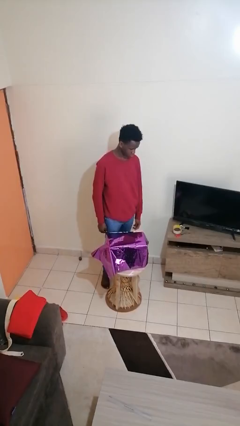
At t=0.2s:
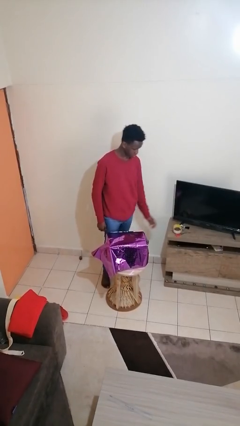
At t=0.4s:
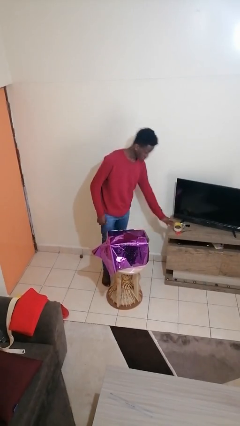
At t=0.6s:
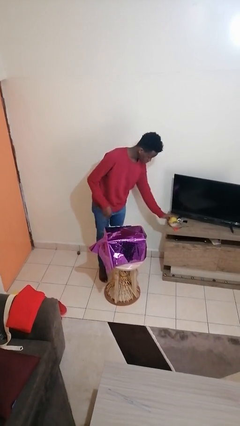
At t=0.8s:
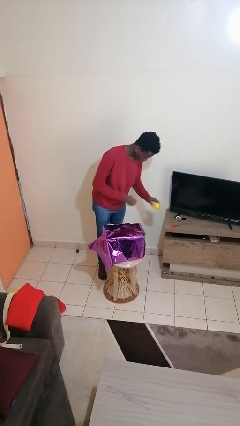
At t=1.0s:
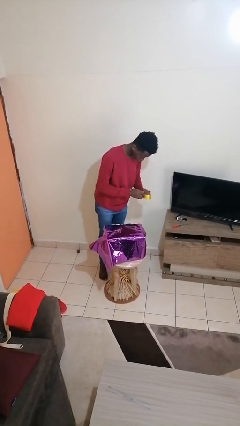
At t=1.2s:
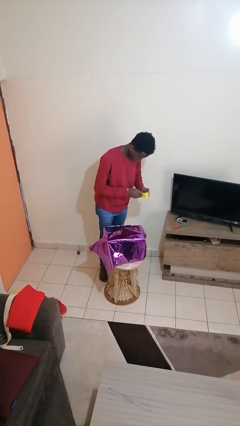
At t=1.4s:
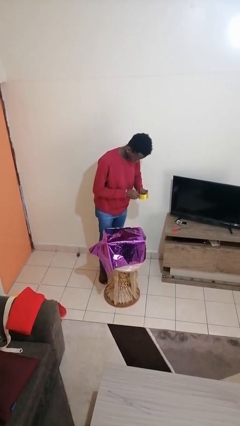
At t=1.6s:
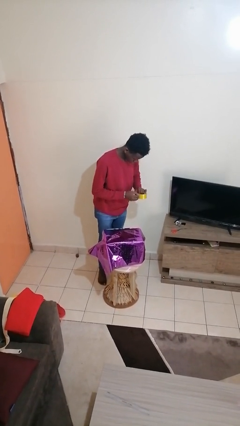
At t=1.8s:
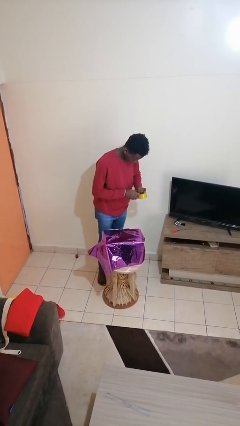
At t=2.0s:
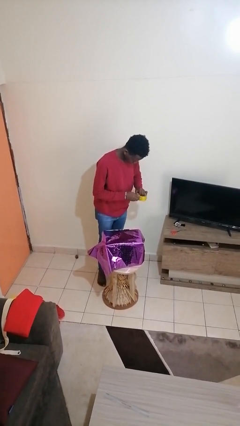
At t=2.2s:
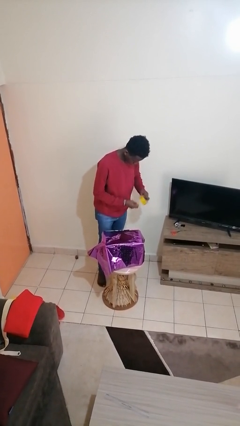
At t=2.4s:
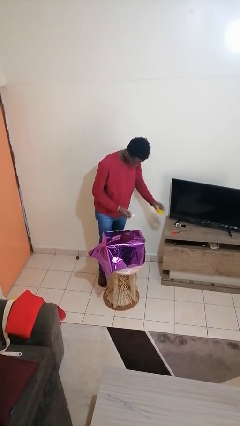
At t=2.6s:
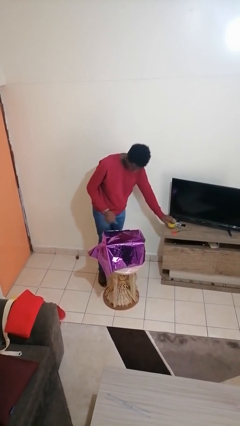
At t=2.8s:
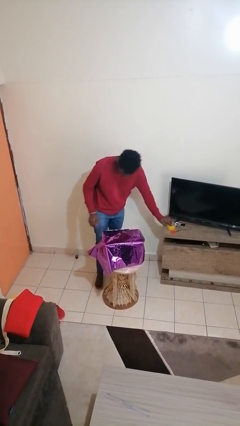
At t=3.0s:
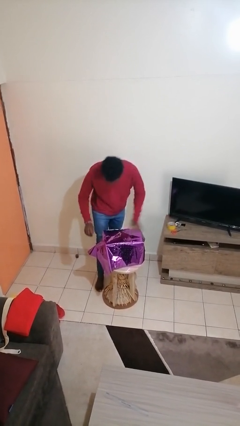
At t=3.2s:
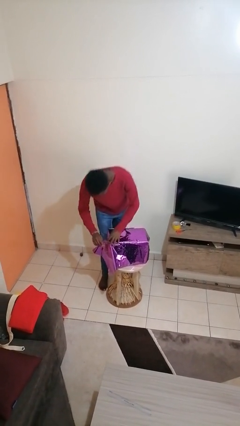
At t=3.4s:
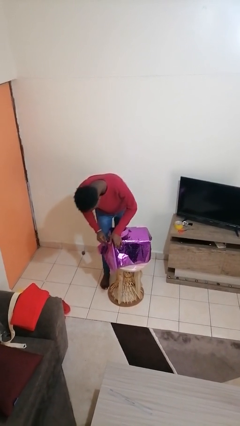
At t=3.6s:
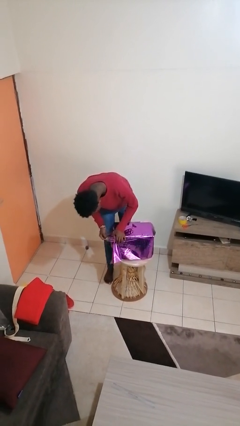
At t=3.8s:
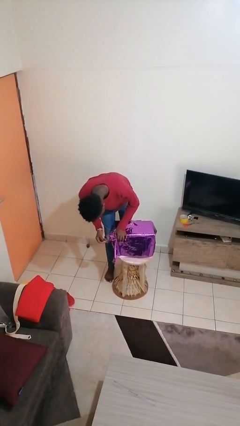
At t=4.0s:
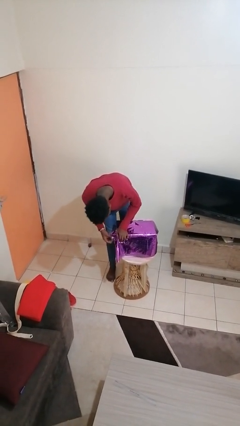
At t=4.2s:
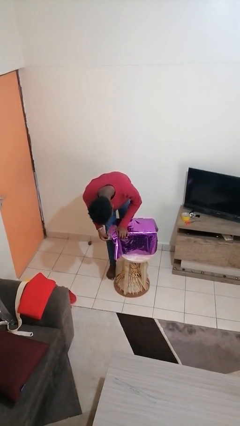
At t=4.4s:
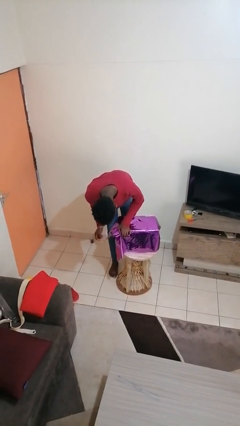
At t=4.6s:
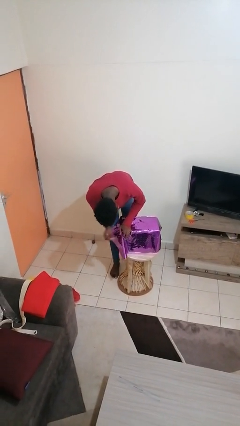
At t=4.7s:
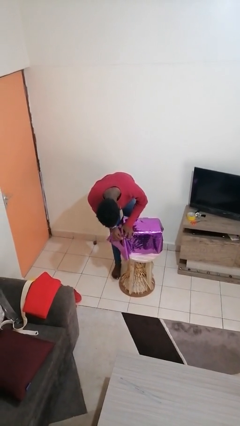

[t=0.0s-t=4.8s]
person wraps box

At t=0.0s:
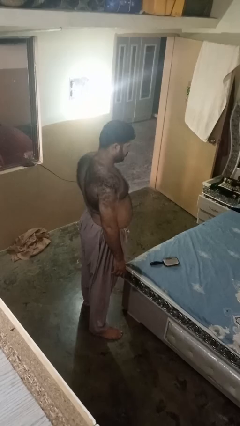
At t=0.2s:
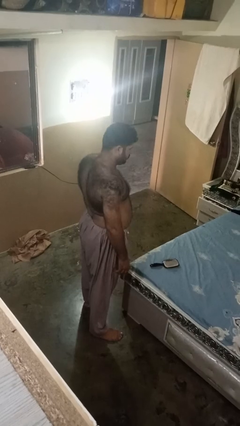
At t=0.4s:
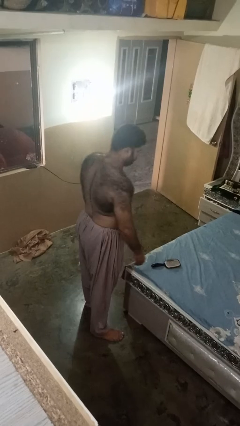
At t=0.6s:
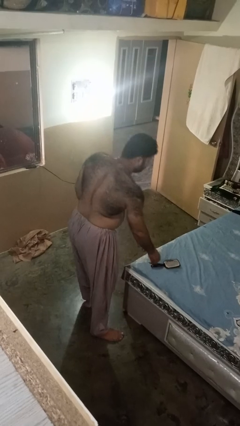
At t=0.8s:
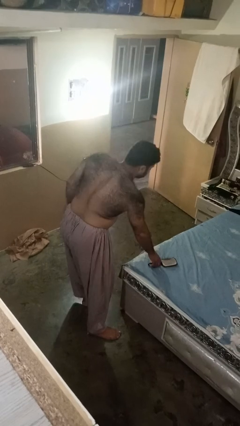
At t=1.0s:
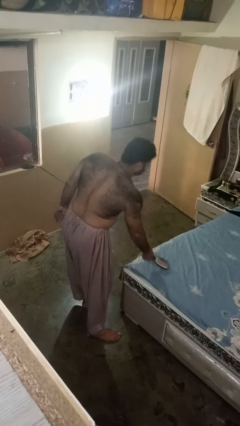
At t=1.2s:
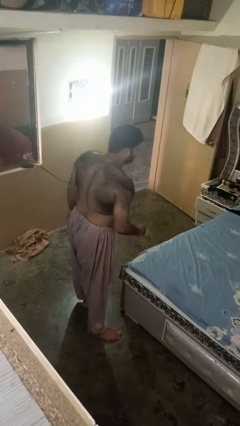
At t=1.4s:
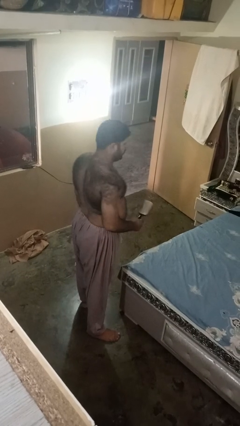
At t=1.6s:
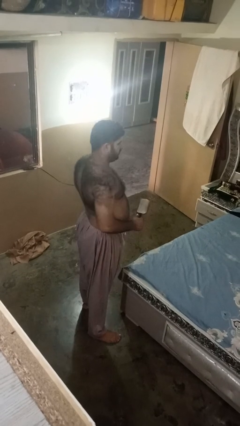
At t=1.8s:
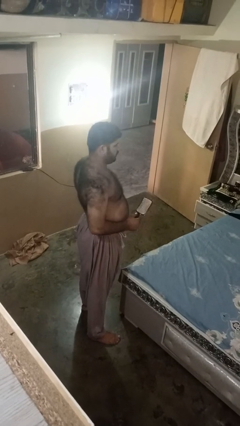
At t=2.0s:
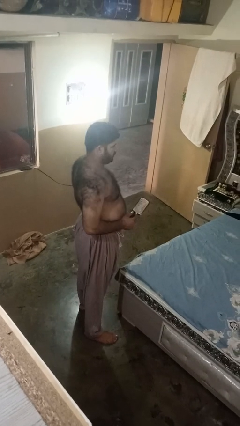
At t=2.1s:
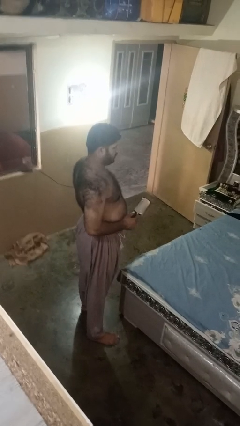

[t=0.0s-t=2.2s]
person picks up object from bed

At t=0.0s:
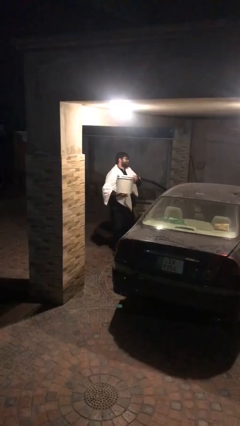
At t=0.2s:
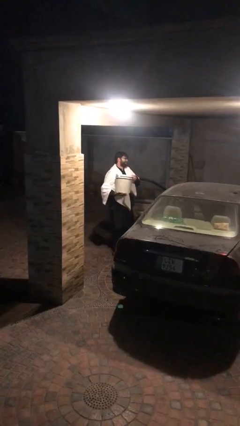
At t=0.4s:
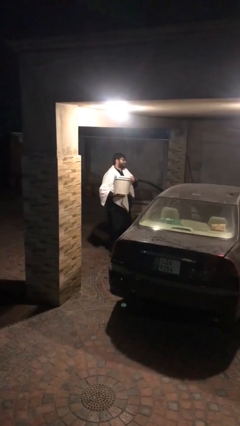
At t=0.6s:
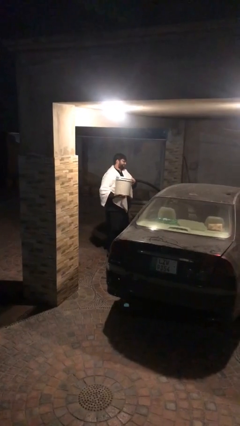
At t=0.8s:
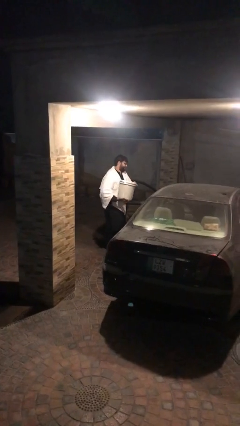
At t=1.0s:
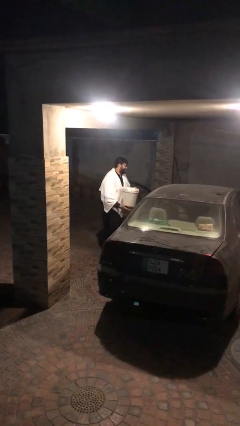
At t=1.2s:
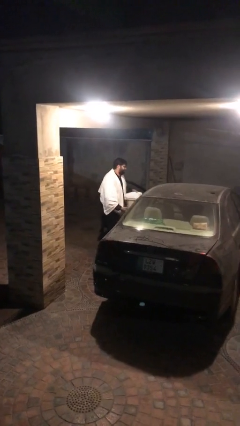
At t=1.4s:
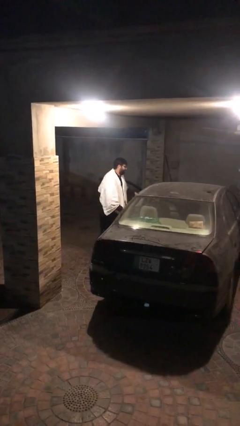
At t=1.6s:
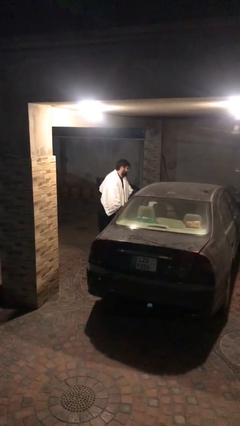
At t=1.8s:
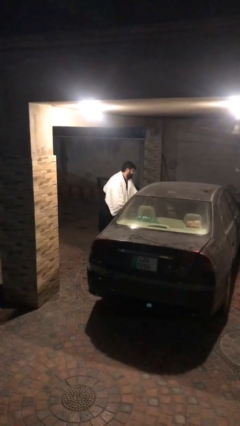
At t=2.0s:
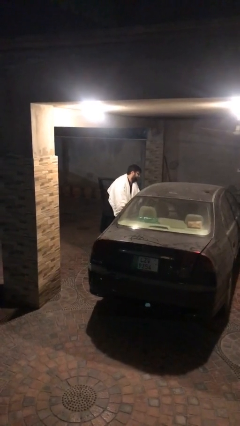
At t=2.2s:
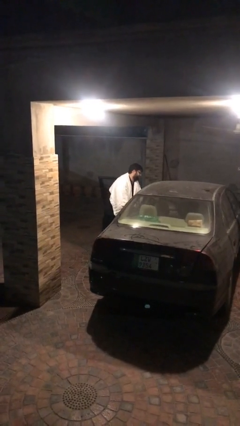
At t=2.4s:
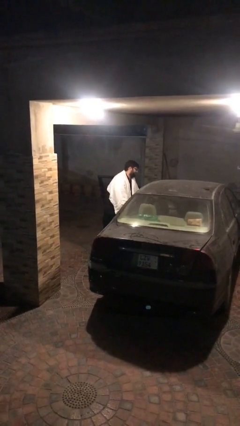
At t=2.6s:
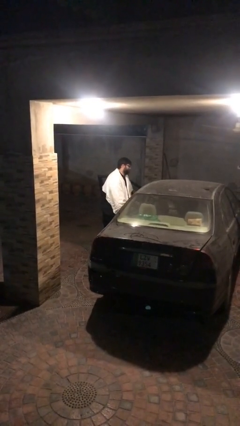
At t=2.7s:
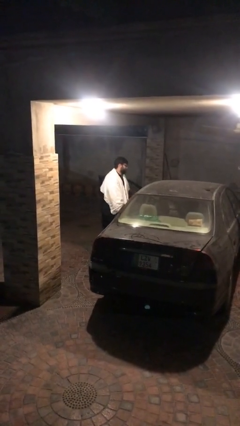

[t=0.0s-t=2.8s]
person loads car

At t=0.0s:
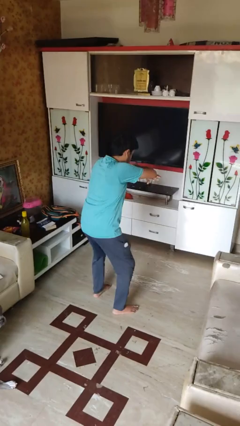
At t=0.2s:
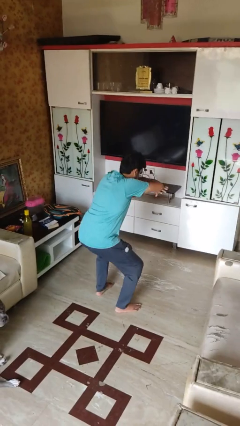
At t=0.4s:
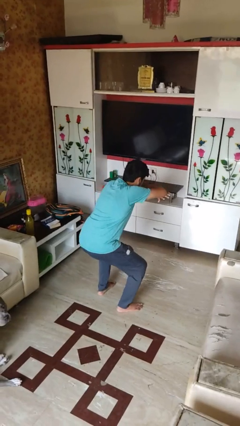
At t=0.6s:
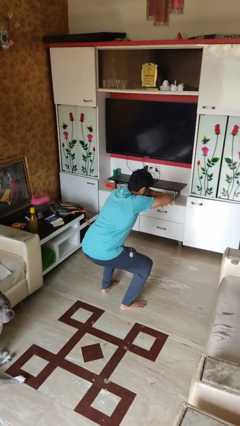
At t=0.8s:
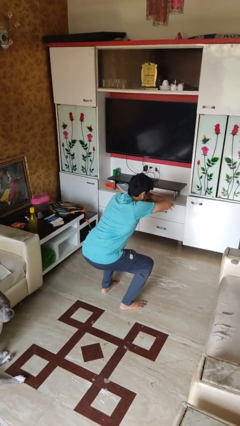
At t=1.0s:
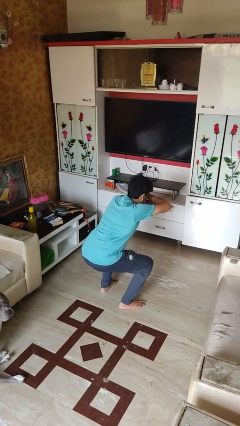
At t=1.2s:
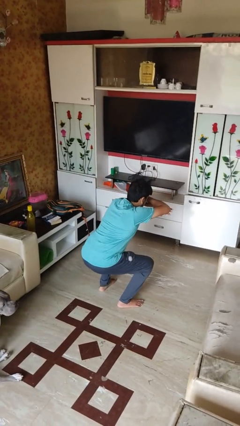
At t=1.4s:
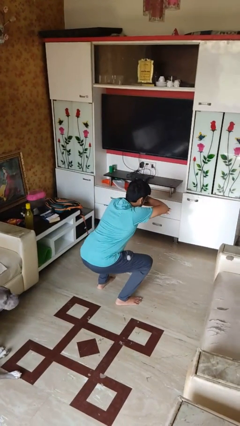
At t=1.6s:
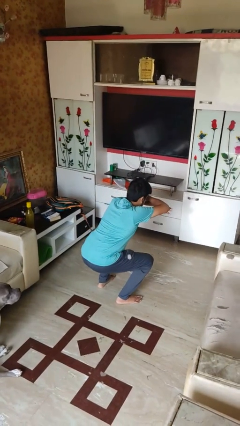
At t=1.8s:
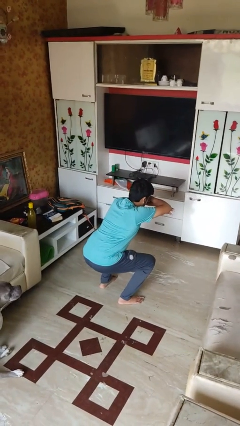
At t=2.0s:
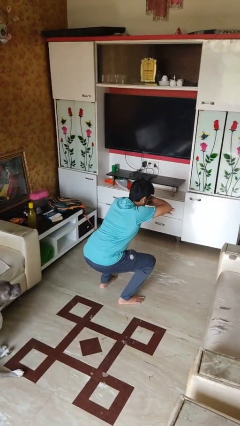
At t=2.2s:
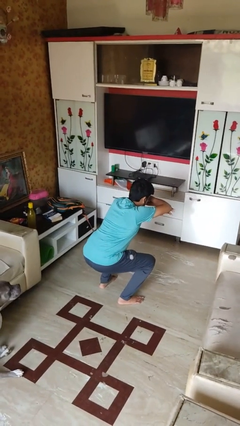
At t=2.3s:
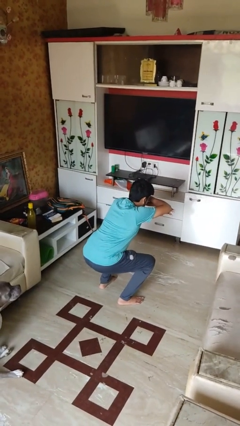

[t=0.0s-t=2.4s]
person squats

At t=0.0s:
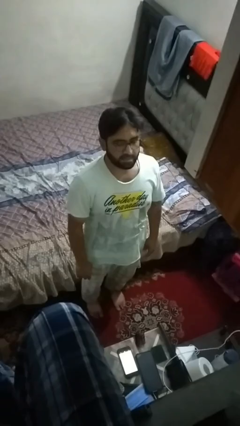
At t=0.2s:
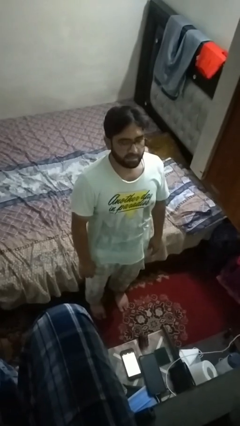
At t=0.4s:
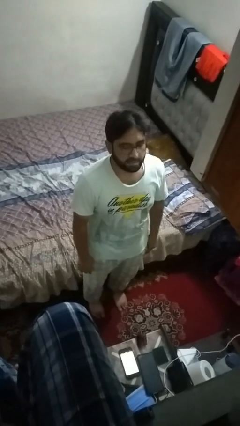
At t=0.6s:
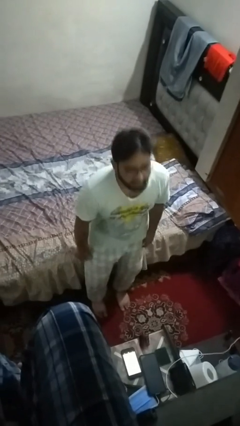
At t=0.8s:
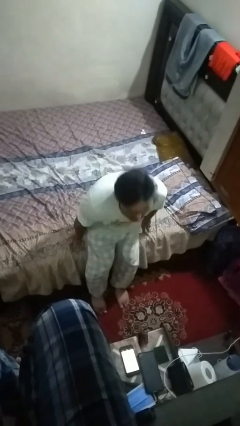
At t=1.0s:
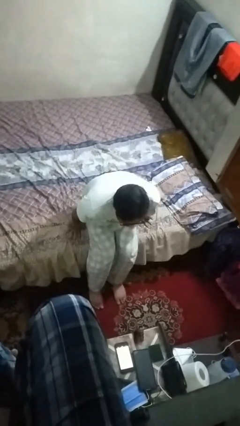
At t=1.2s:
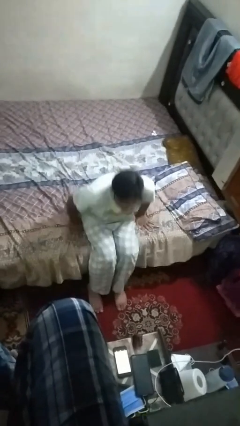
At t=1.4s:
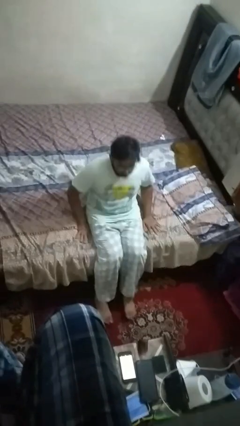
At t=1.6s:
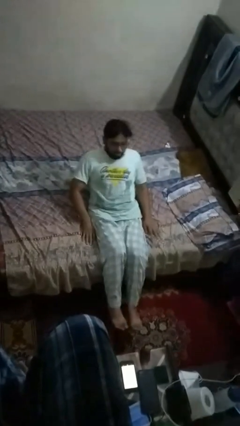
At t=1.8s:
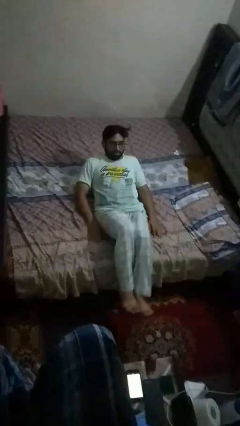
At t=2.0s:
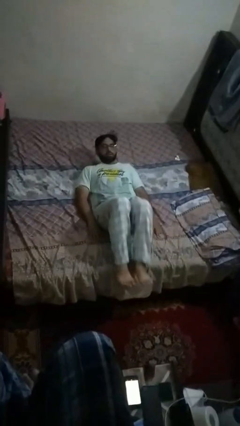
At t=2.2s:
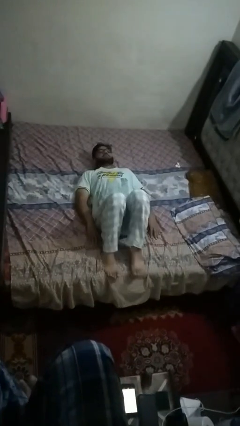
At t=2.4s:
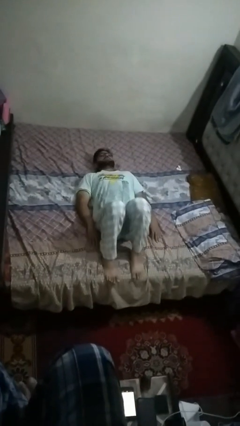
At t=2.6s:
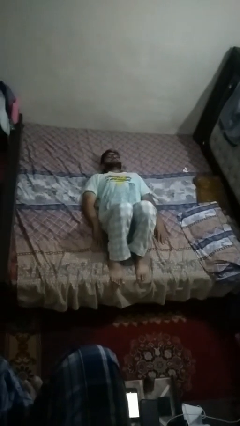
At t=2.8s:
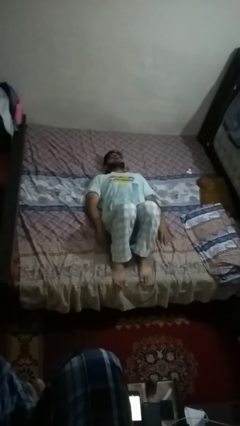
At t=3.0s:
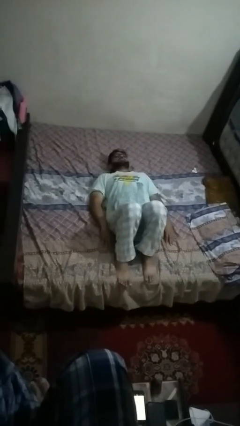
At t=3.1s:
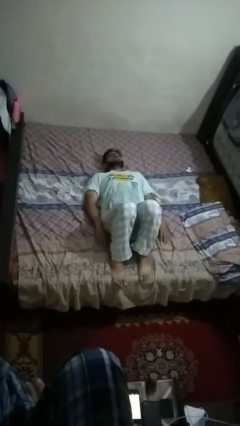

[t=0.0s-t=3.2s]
person lies down on bed

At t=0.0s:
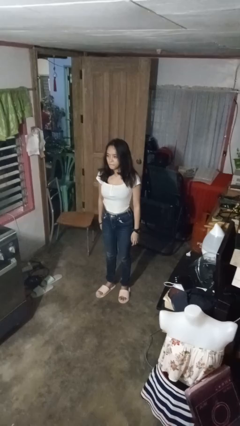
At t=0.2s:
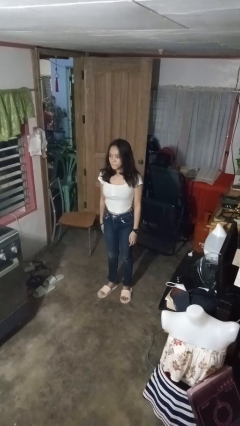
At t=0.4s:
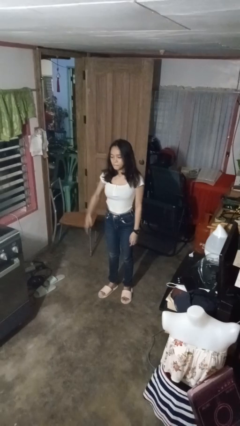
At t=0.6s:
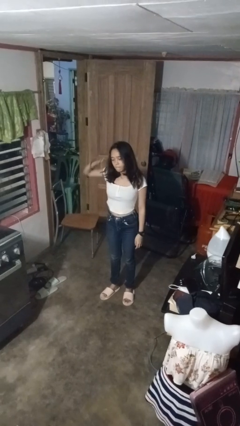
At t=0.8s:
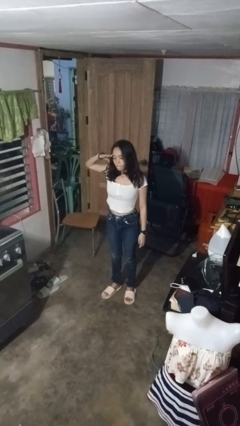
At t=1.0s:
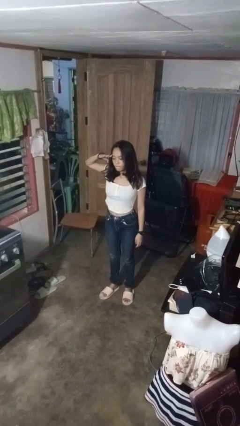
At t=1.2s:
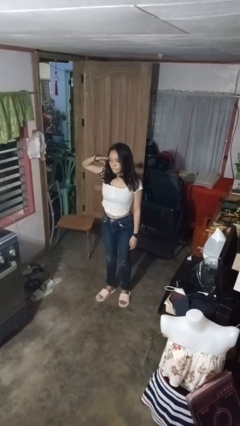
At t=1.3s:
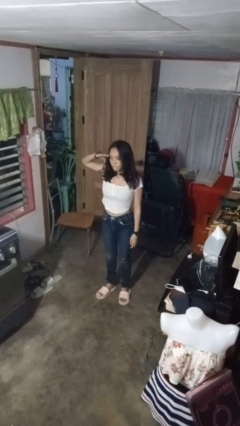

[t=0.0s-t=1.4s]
person salutes

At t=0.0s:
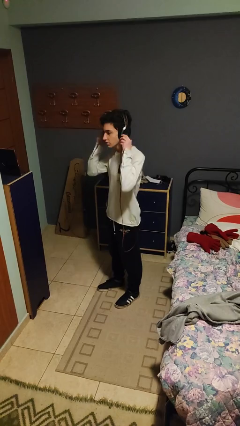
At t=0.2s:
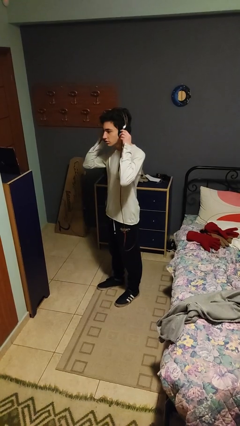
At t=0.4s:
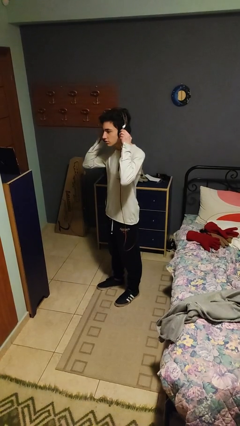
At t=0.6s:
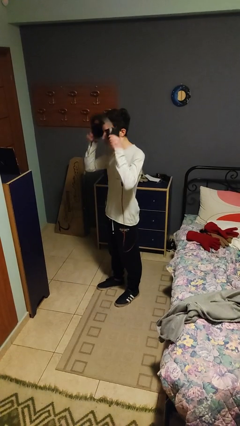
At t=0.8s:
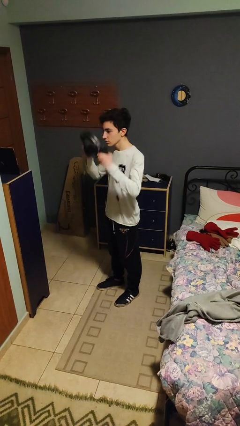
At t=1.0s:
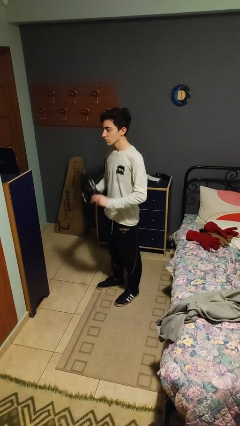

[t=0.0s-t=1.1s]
person takes off headphones
